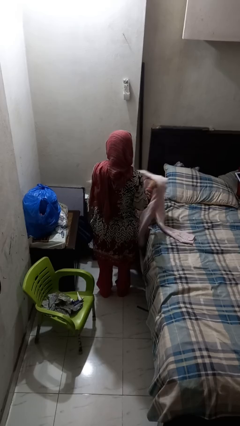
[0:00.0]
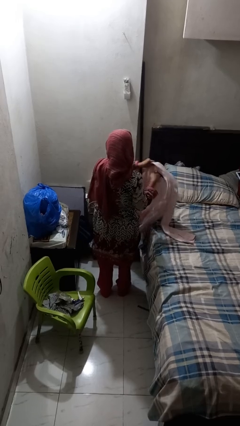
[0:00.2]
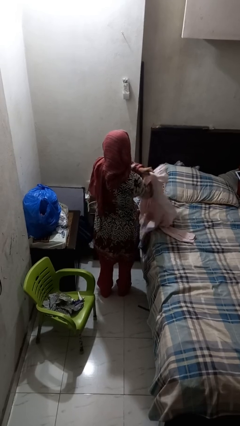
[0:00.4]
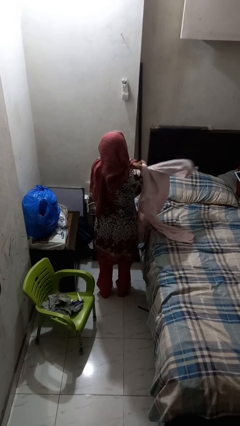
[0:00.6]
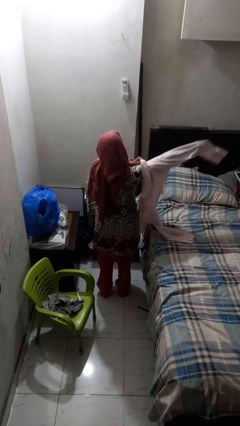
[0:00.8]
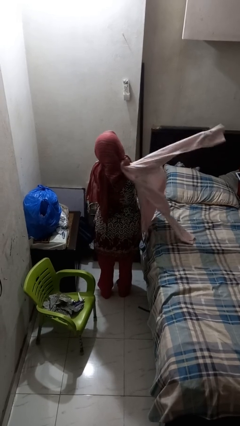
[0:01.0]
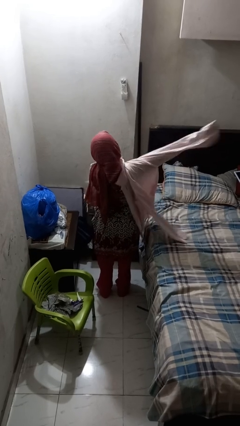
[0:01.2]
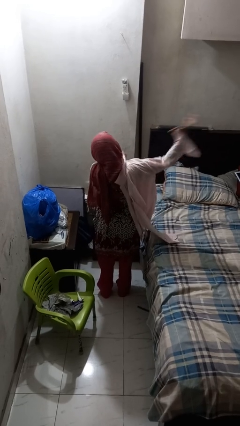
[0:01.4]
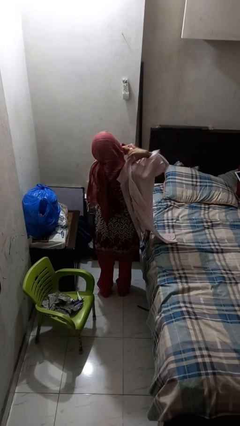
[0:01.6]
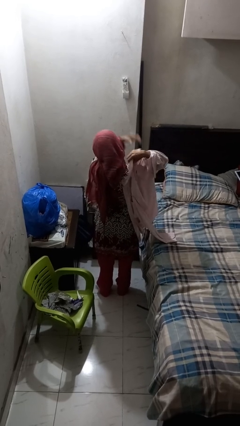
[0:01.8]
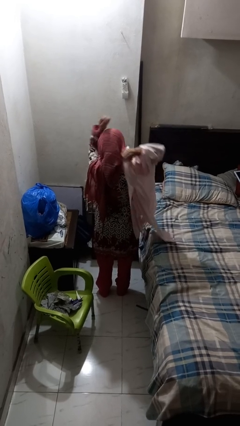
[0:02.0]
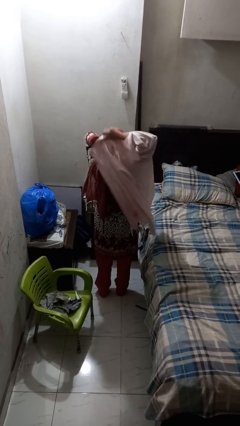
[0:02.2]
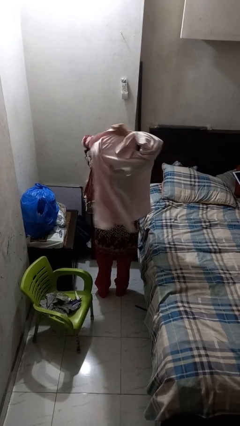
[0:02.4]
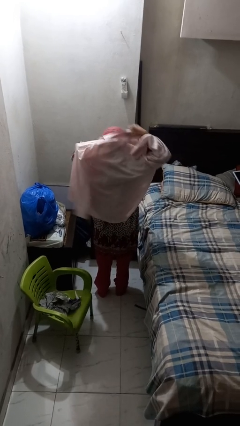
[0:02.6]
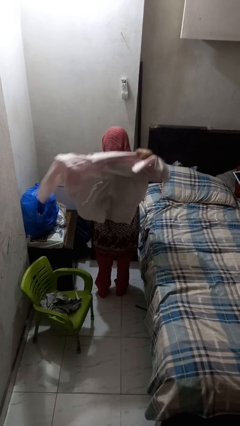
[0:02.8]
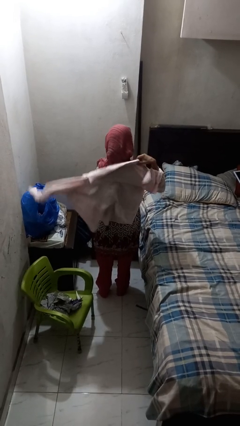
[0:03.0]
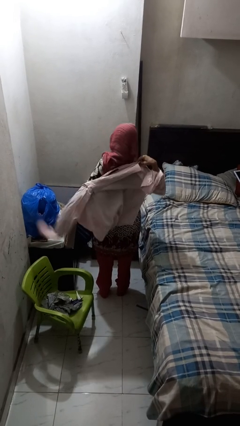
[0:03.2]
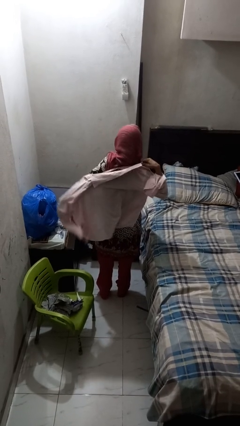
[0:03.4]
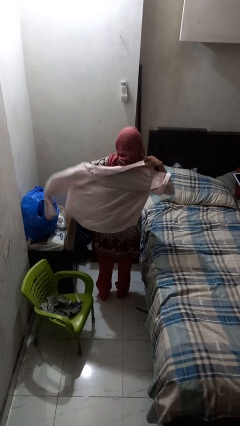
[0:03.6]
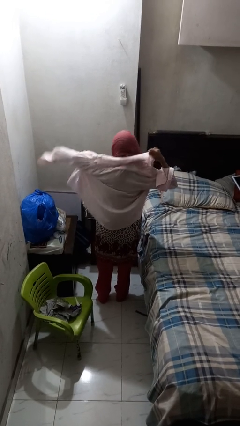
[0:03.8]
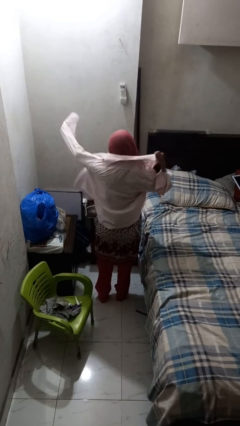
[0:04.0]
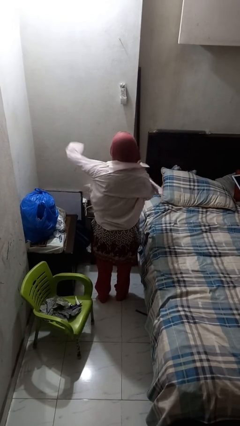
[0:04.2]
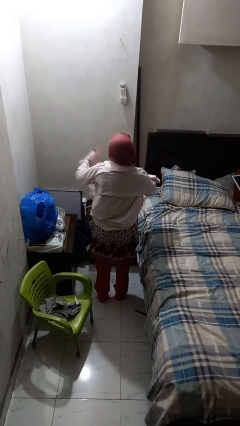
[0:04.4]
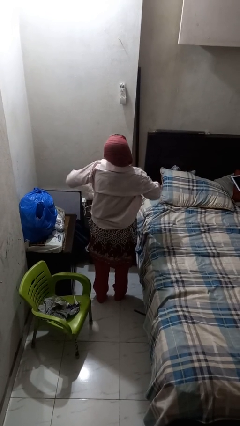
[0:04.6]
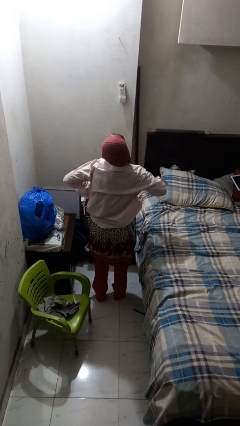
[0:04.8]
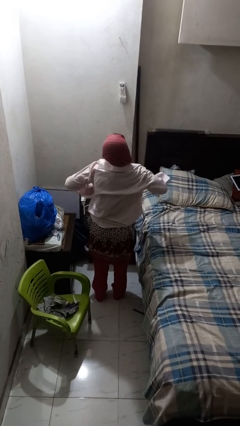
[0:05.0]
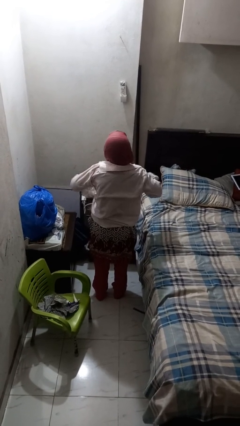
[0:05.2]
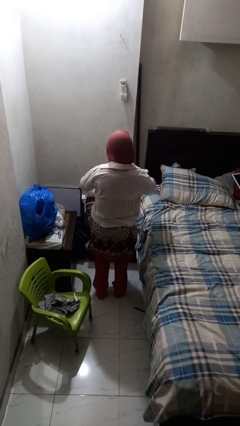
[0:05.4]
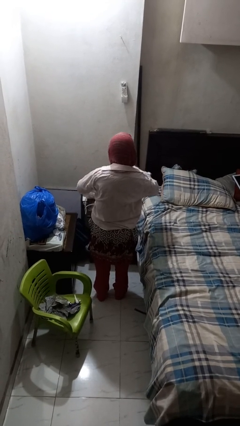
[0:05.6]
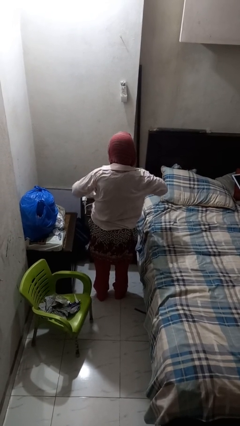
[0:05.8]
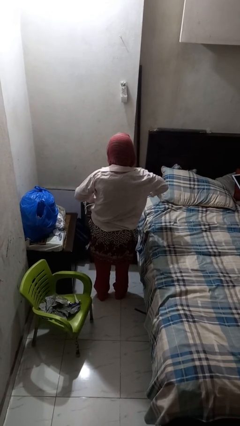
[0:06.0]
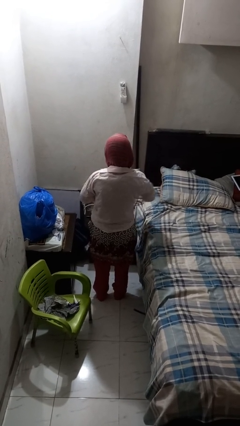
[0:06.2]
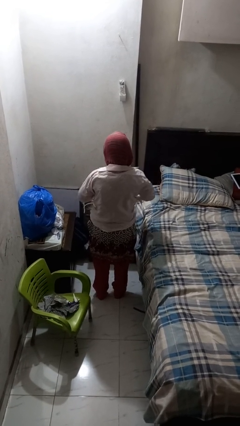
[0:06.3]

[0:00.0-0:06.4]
person puts on shirt

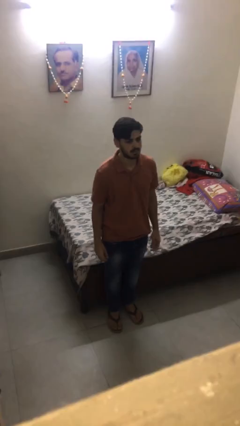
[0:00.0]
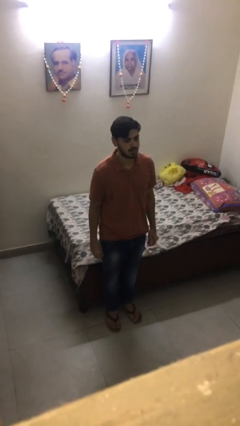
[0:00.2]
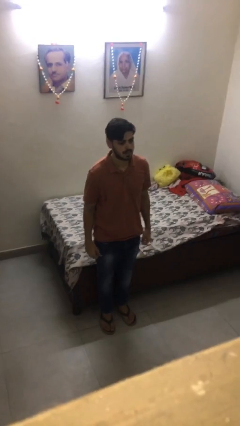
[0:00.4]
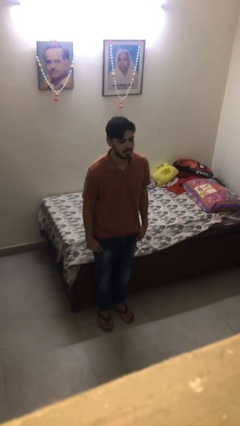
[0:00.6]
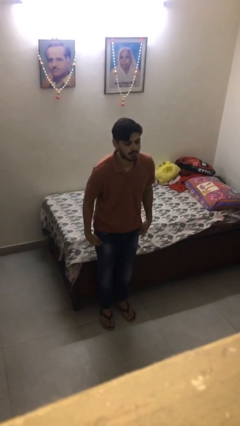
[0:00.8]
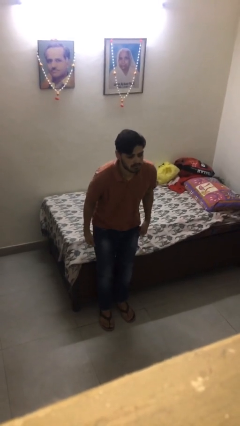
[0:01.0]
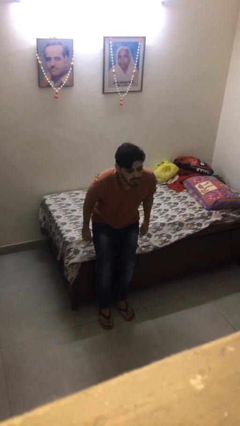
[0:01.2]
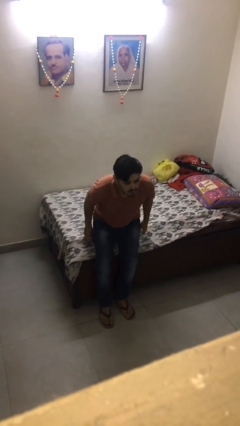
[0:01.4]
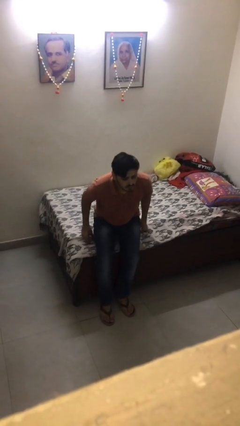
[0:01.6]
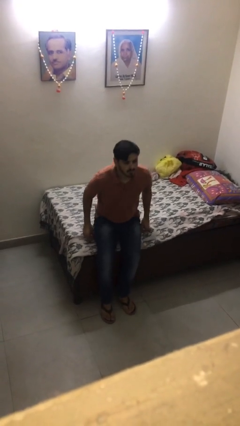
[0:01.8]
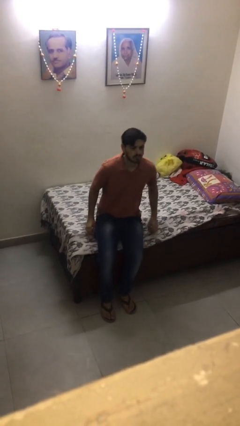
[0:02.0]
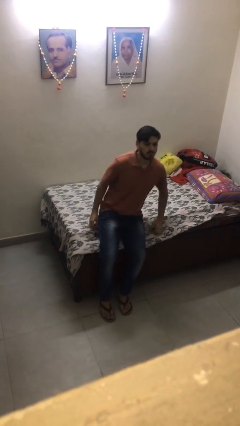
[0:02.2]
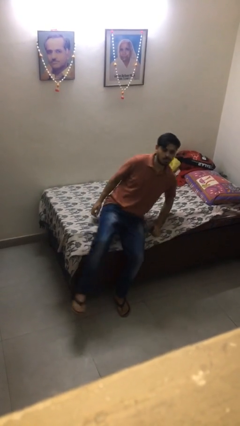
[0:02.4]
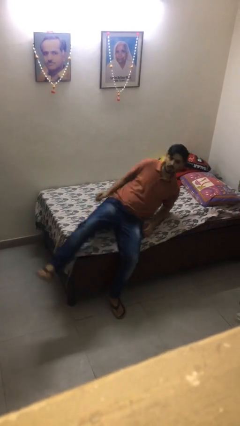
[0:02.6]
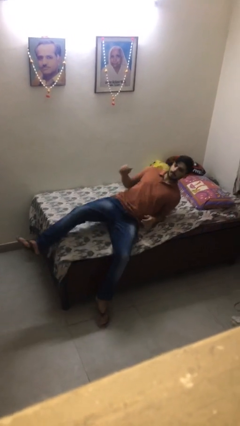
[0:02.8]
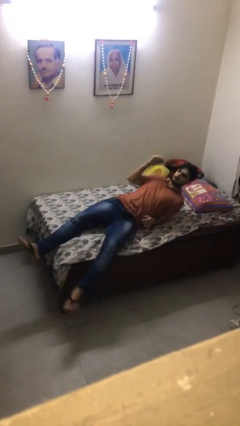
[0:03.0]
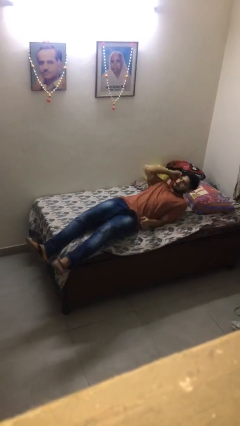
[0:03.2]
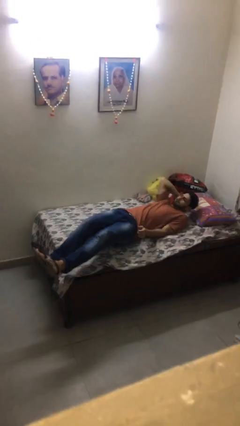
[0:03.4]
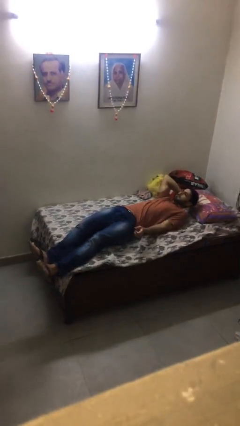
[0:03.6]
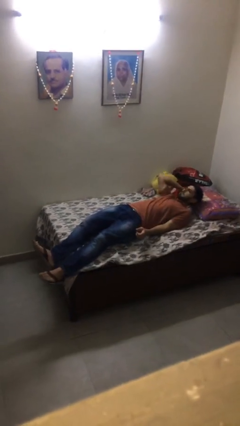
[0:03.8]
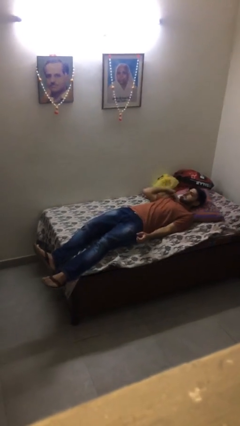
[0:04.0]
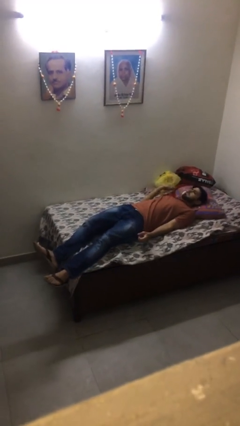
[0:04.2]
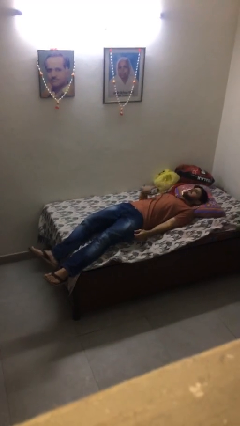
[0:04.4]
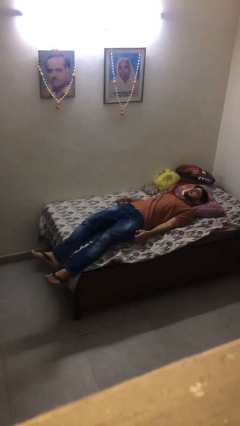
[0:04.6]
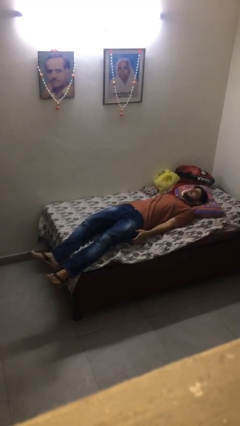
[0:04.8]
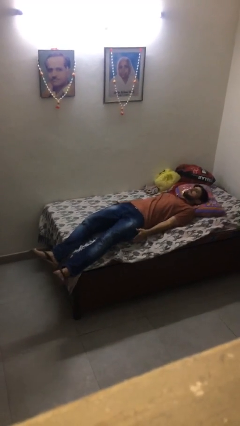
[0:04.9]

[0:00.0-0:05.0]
person lies down on bed

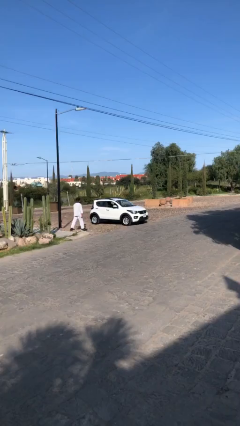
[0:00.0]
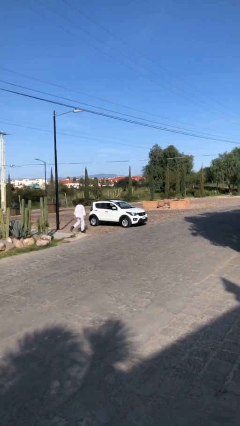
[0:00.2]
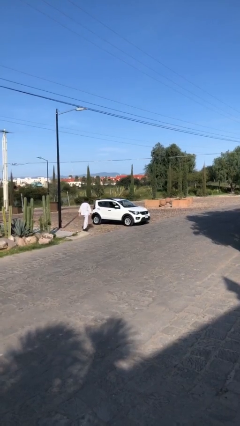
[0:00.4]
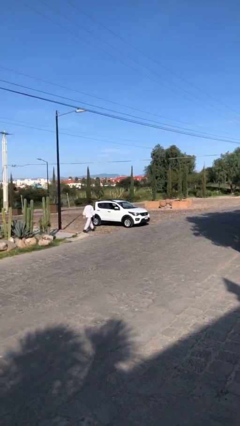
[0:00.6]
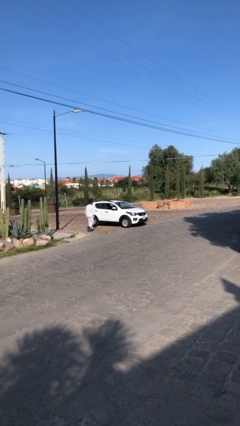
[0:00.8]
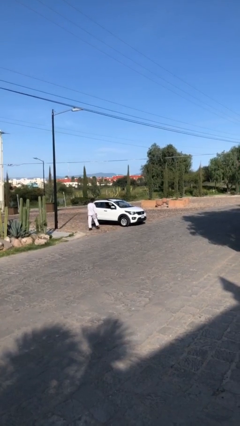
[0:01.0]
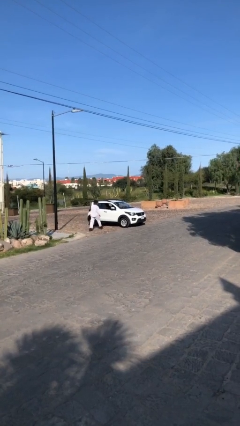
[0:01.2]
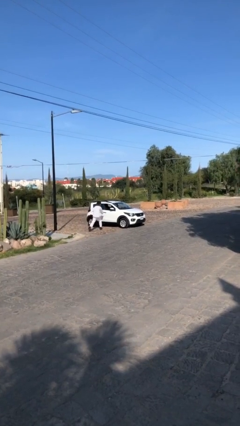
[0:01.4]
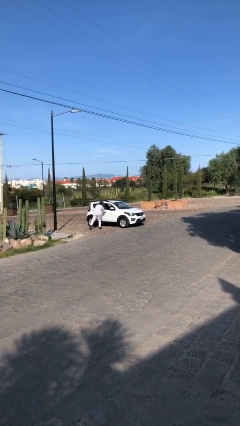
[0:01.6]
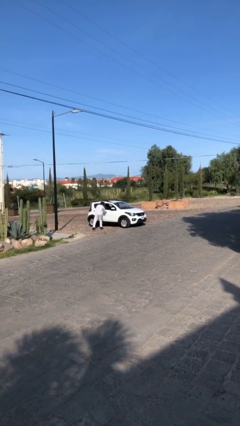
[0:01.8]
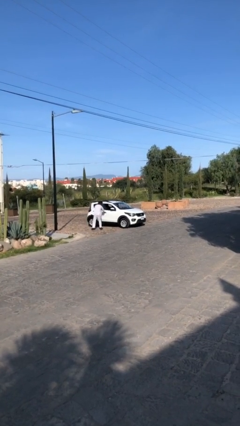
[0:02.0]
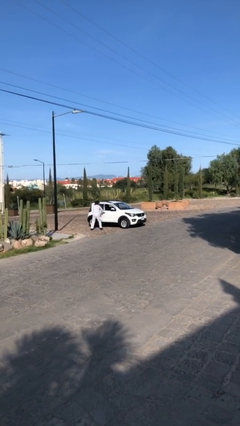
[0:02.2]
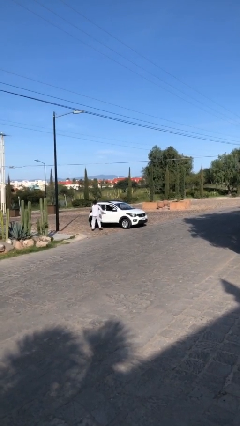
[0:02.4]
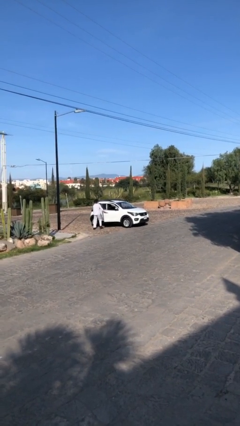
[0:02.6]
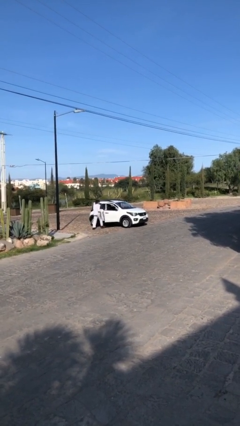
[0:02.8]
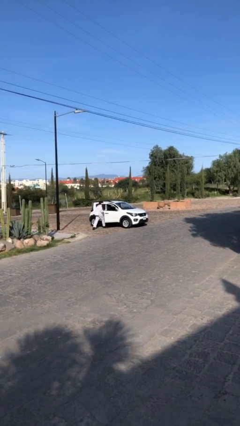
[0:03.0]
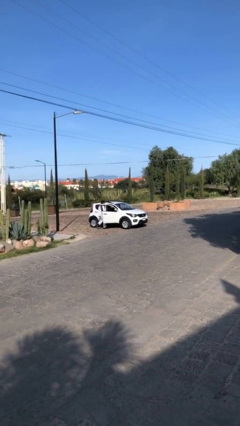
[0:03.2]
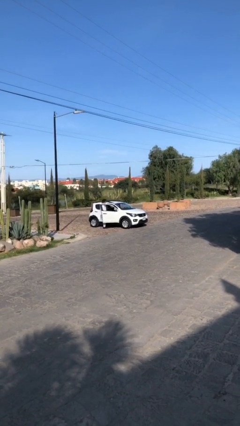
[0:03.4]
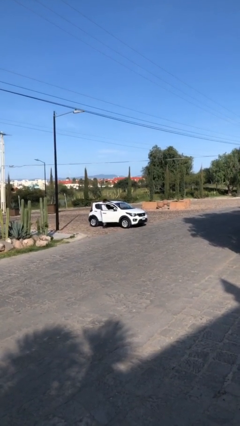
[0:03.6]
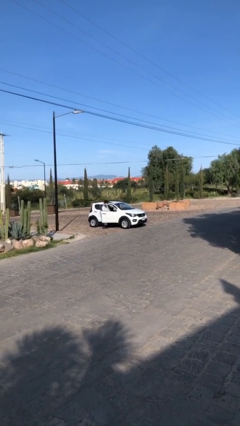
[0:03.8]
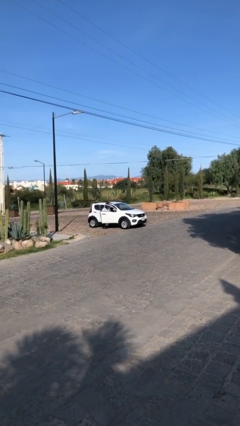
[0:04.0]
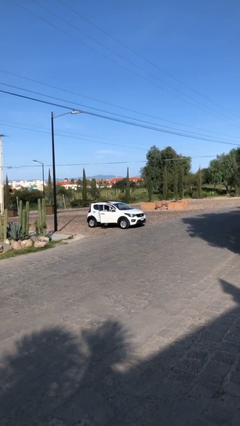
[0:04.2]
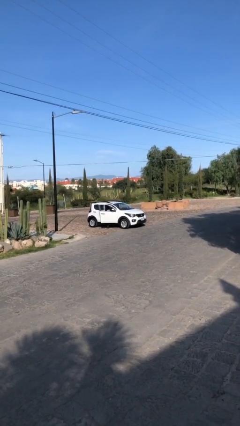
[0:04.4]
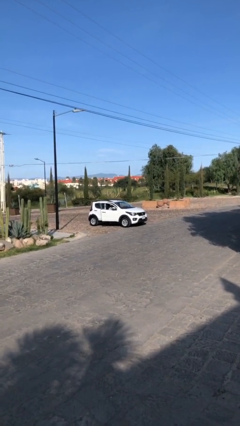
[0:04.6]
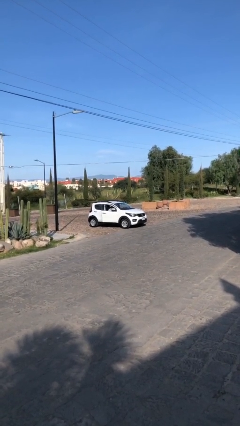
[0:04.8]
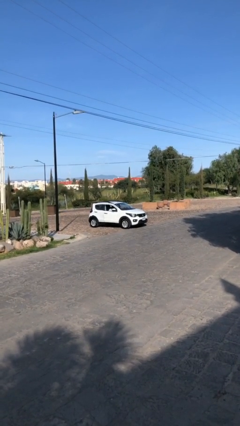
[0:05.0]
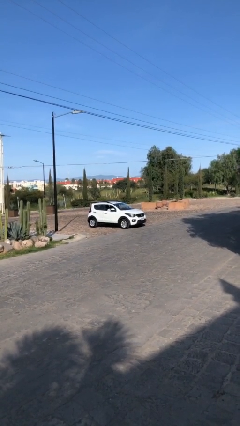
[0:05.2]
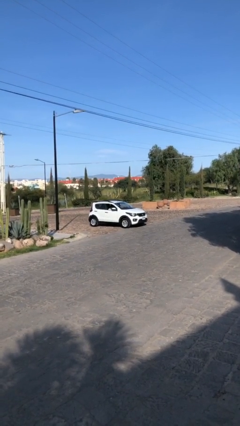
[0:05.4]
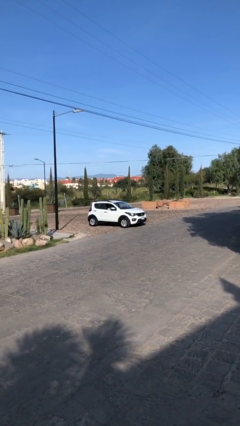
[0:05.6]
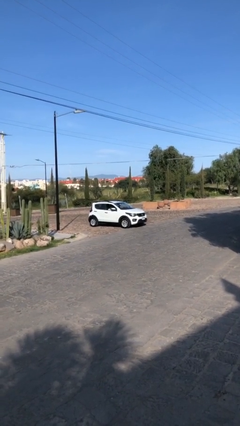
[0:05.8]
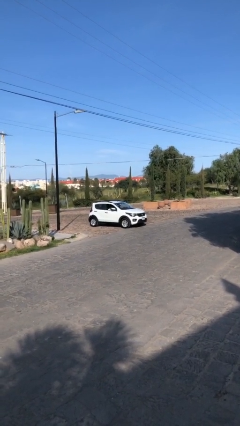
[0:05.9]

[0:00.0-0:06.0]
car picks up person

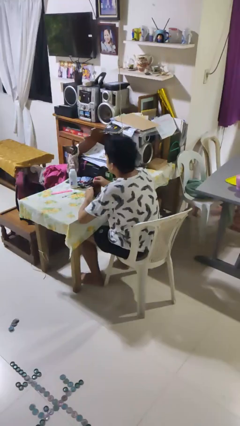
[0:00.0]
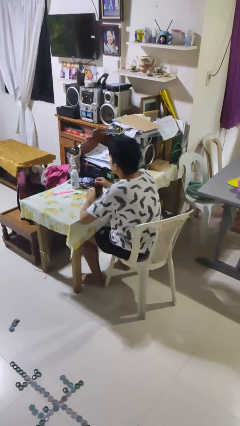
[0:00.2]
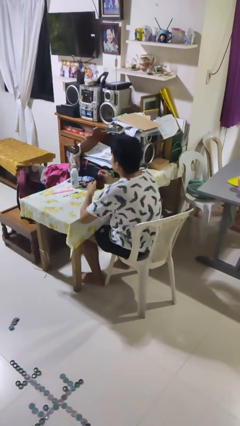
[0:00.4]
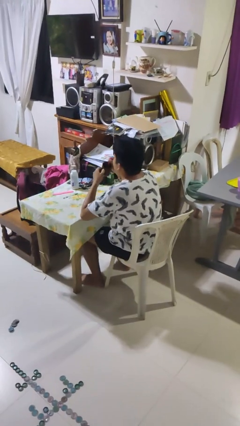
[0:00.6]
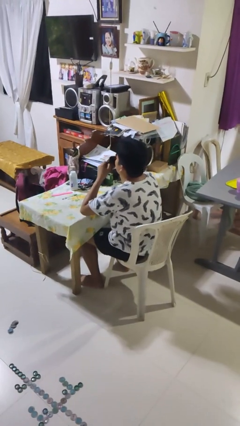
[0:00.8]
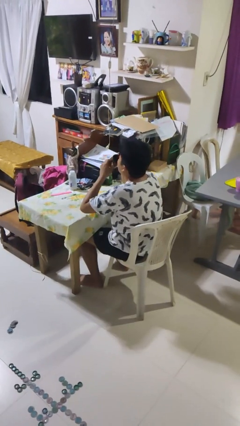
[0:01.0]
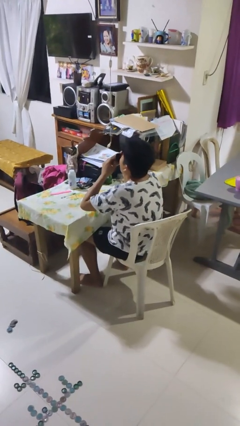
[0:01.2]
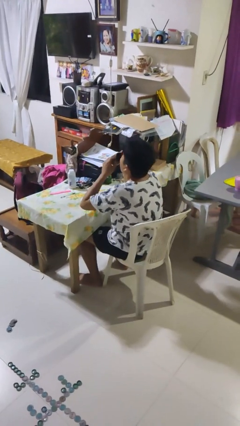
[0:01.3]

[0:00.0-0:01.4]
person drinks from mug
